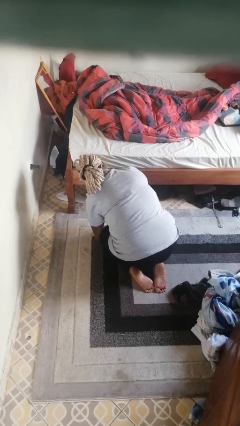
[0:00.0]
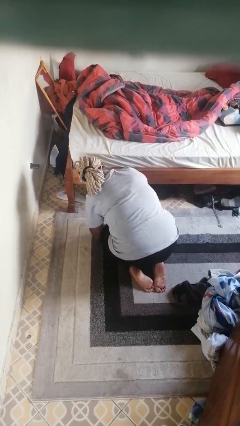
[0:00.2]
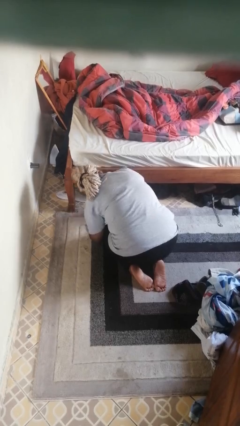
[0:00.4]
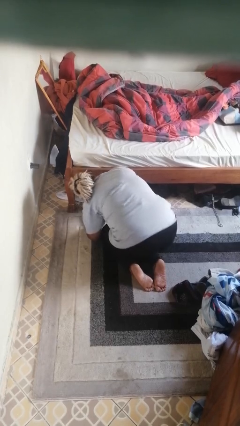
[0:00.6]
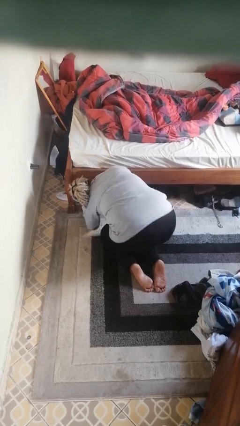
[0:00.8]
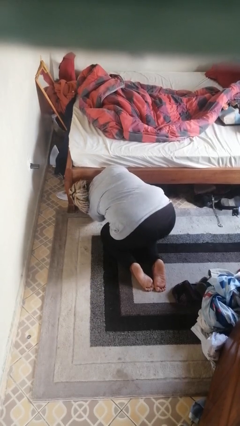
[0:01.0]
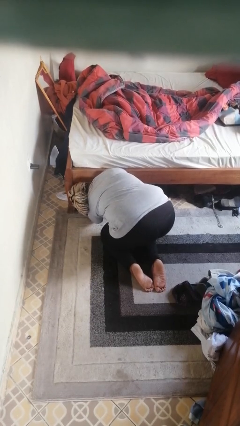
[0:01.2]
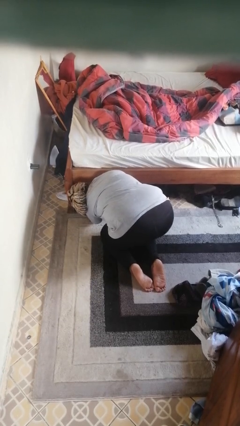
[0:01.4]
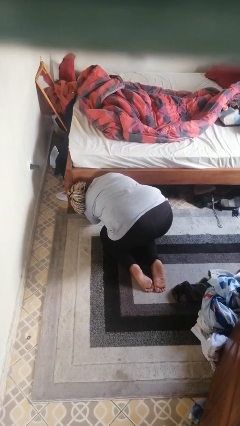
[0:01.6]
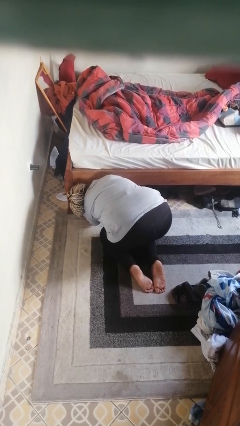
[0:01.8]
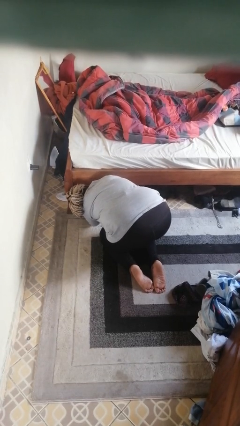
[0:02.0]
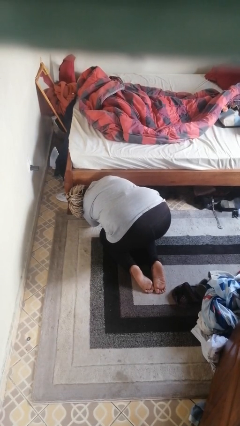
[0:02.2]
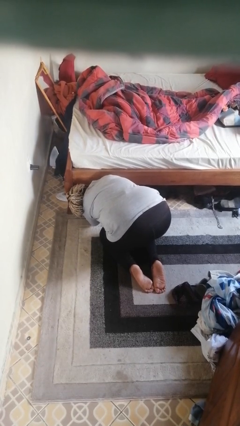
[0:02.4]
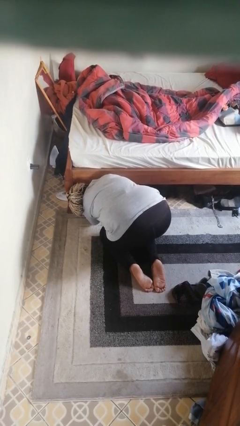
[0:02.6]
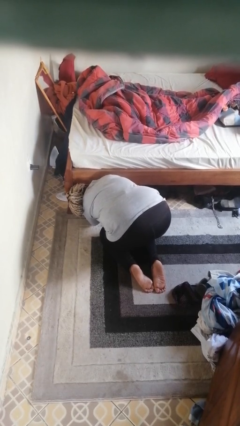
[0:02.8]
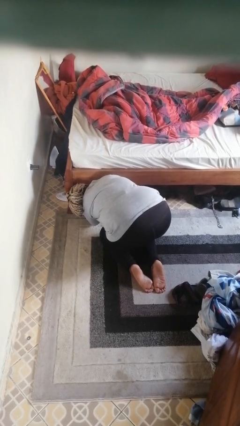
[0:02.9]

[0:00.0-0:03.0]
person searches under bed
